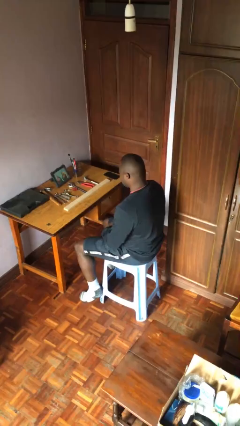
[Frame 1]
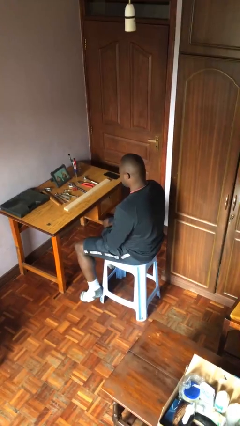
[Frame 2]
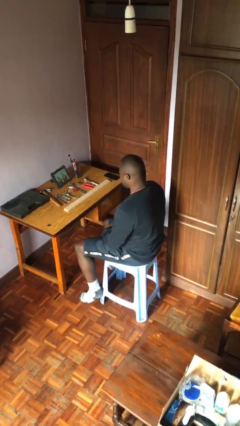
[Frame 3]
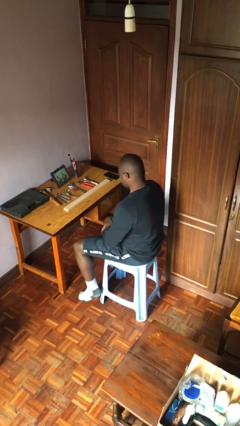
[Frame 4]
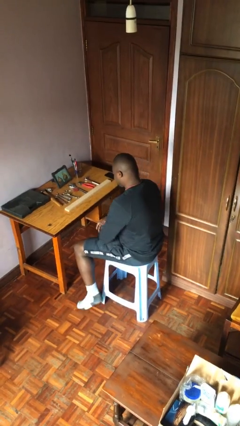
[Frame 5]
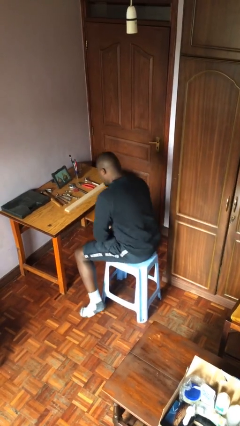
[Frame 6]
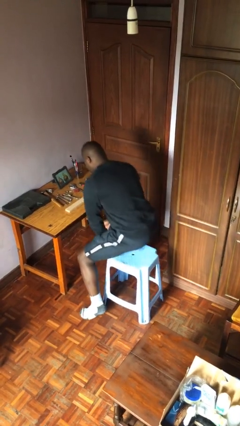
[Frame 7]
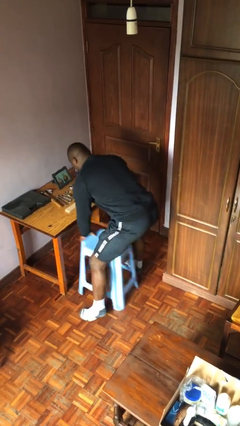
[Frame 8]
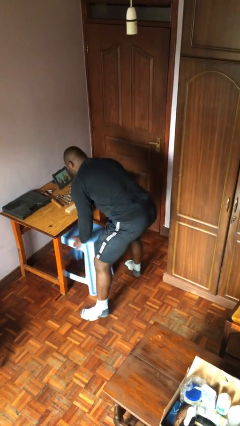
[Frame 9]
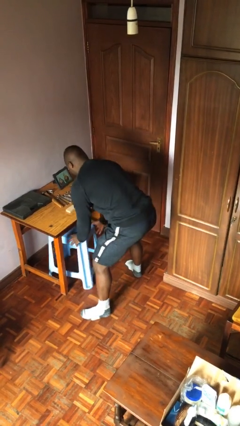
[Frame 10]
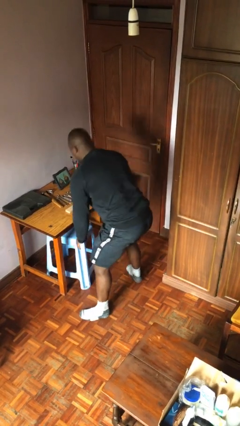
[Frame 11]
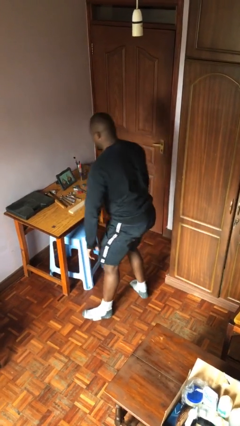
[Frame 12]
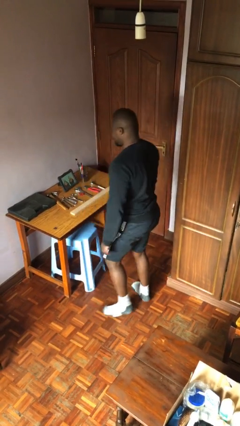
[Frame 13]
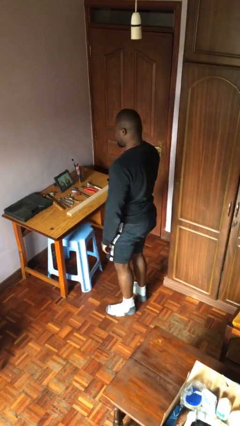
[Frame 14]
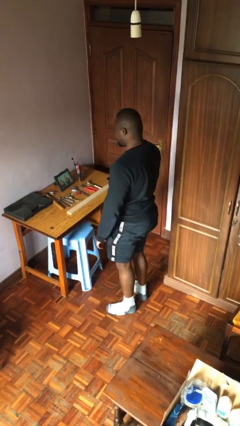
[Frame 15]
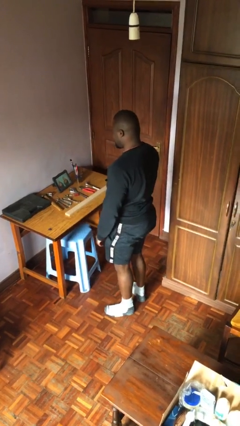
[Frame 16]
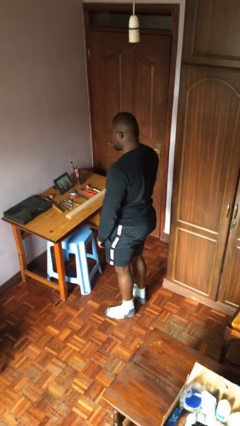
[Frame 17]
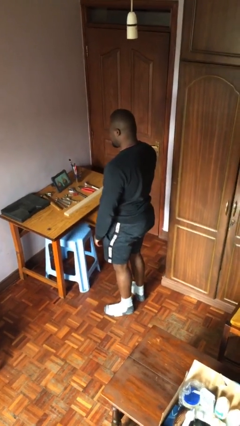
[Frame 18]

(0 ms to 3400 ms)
person stands up

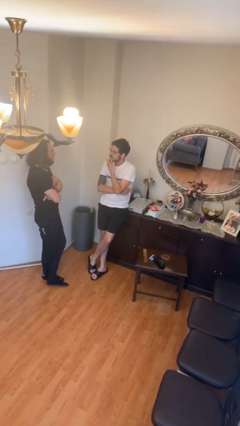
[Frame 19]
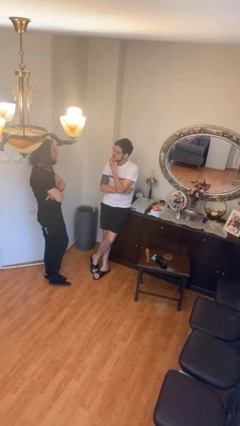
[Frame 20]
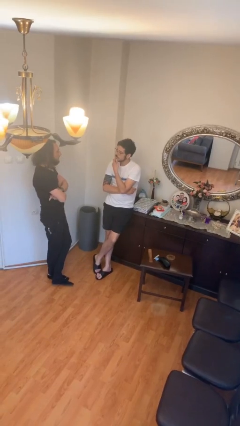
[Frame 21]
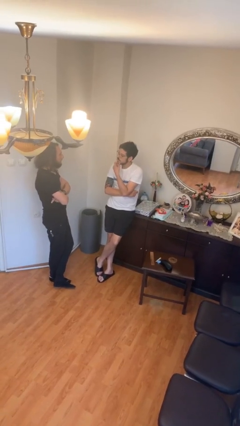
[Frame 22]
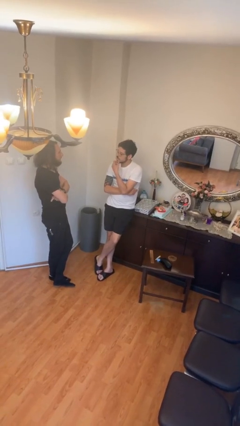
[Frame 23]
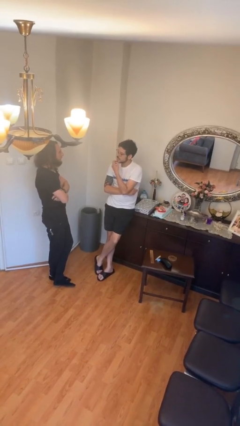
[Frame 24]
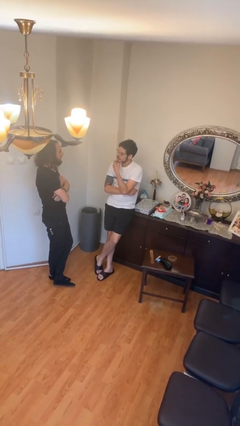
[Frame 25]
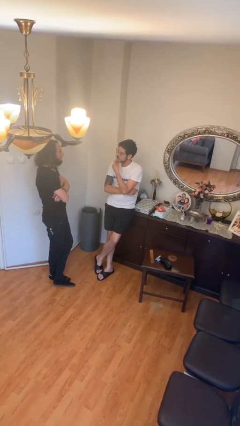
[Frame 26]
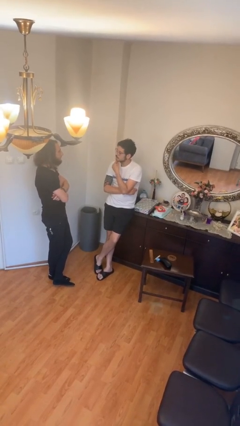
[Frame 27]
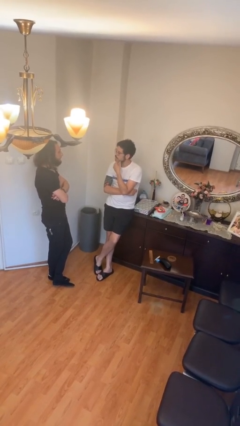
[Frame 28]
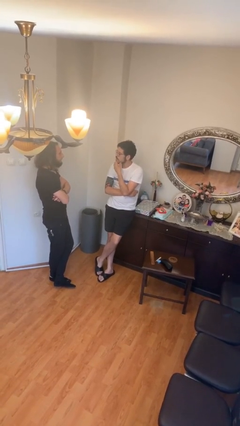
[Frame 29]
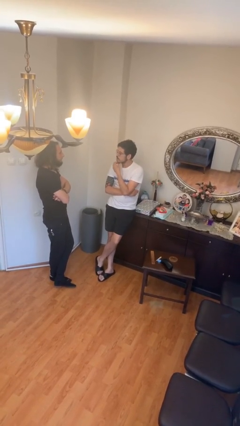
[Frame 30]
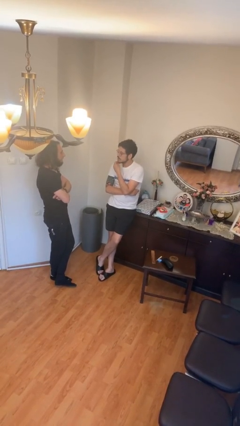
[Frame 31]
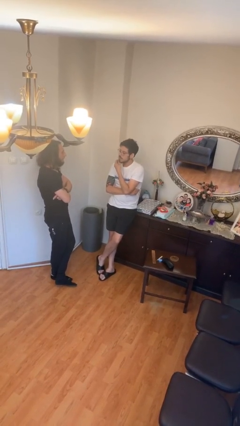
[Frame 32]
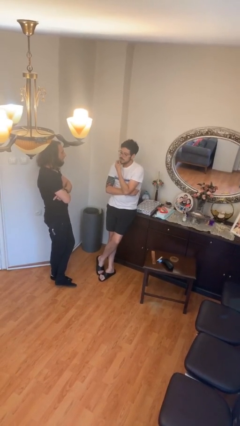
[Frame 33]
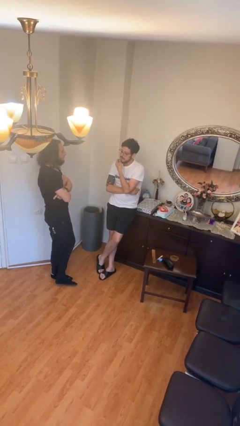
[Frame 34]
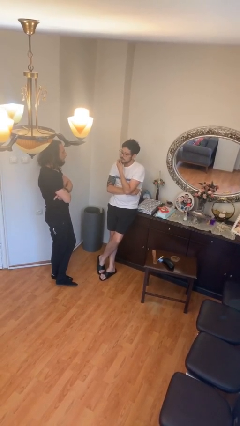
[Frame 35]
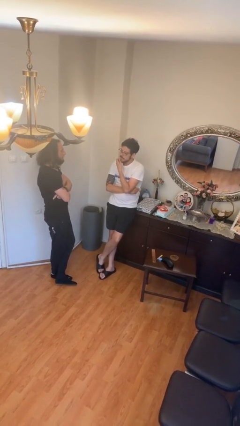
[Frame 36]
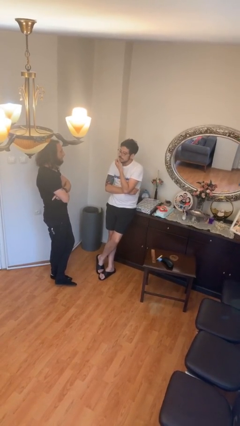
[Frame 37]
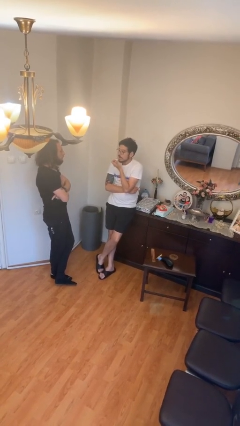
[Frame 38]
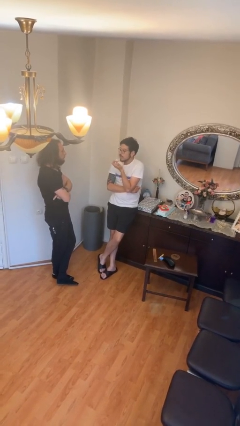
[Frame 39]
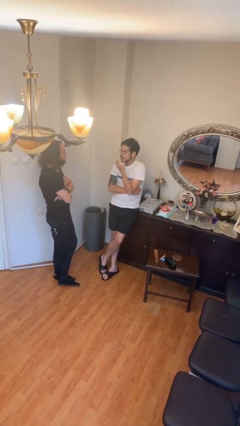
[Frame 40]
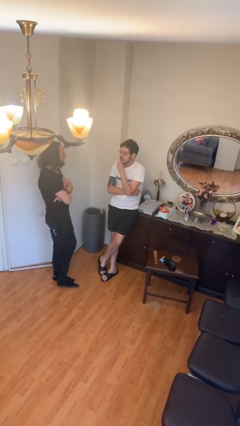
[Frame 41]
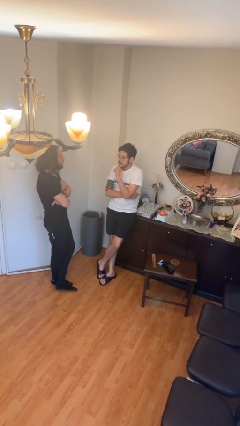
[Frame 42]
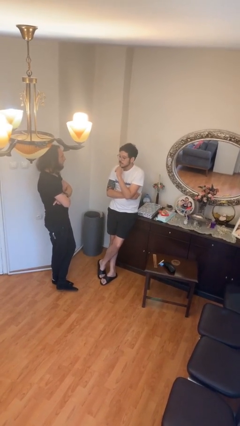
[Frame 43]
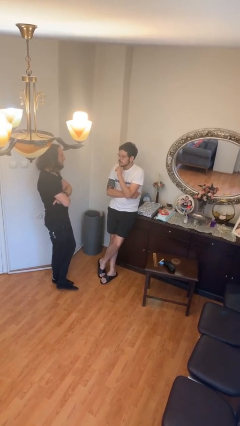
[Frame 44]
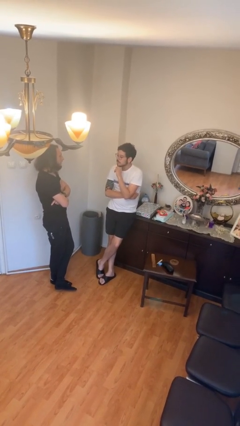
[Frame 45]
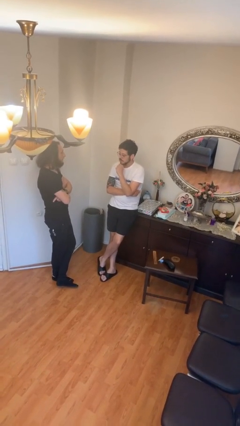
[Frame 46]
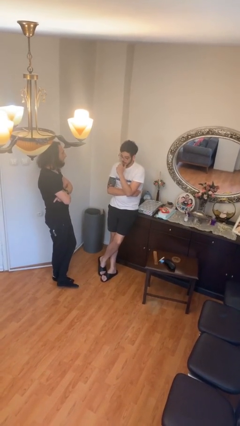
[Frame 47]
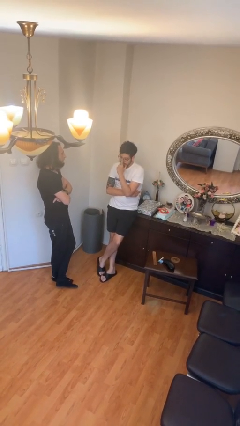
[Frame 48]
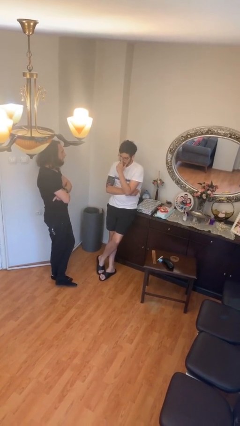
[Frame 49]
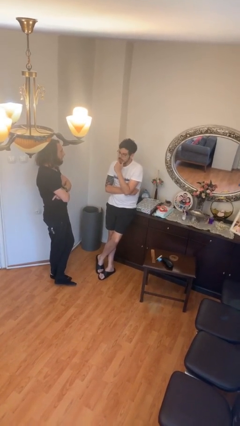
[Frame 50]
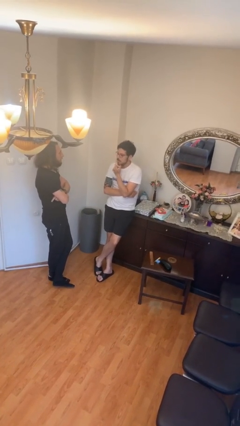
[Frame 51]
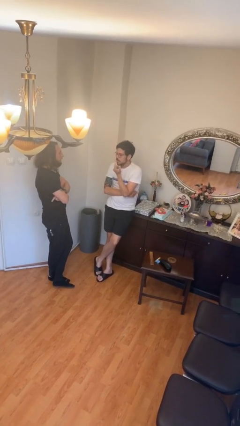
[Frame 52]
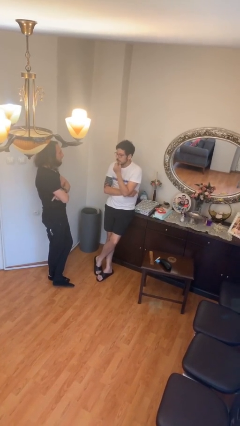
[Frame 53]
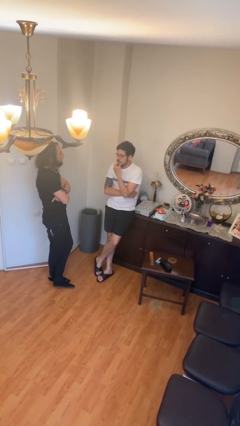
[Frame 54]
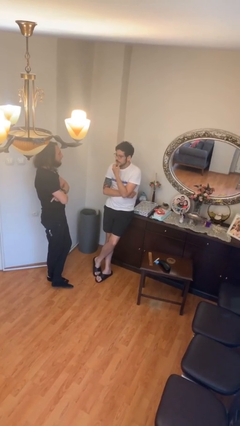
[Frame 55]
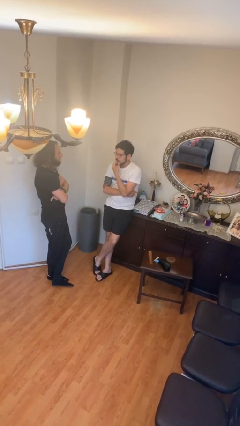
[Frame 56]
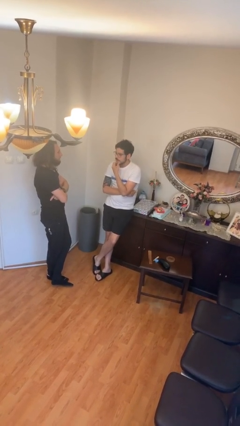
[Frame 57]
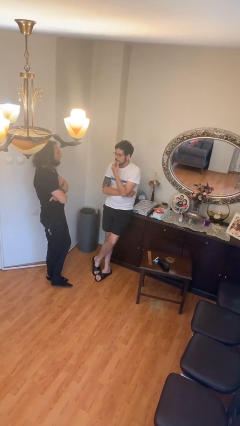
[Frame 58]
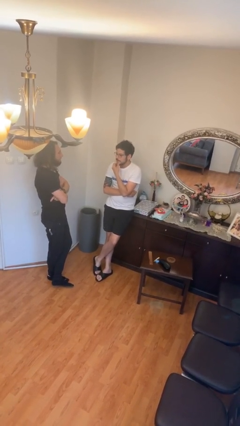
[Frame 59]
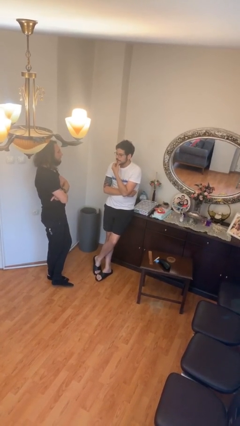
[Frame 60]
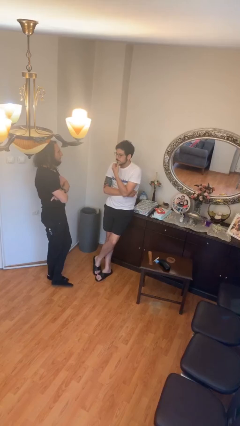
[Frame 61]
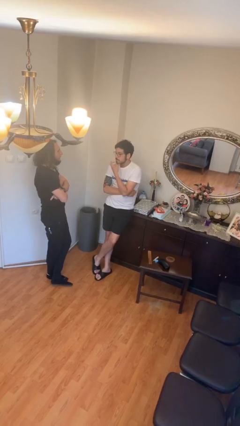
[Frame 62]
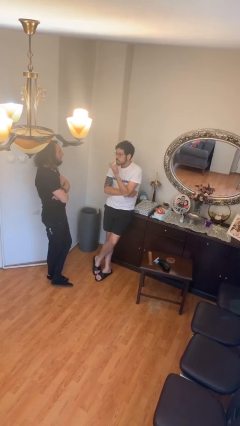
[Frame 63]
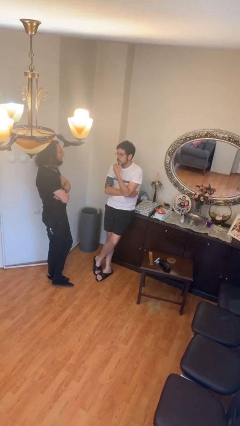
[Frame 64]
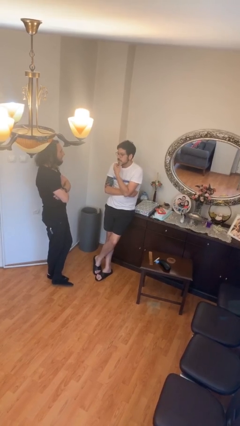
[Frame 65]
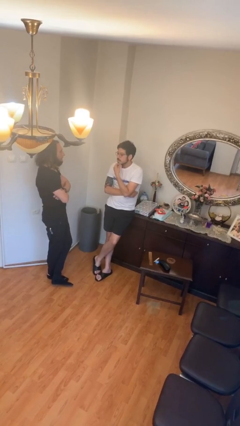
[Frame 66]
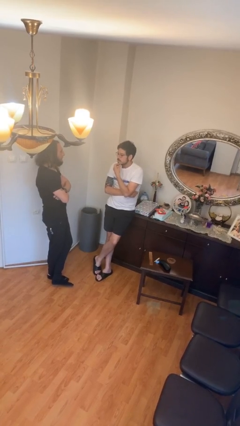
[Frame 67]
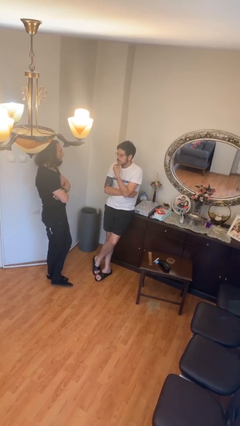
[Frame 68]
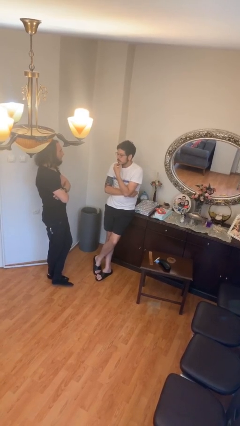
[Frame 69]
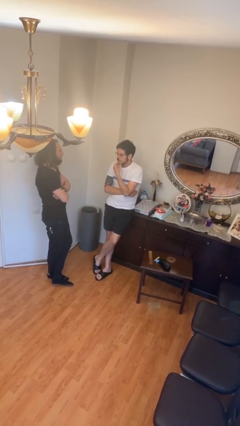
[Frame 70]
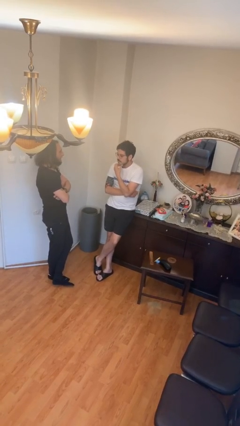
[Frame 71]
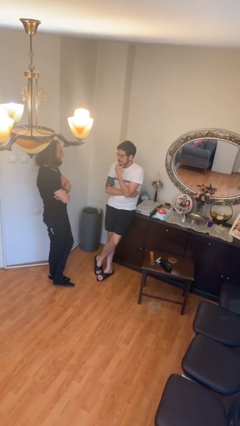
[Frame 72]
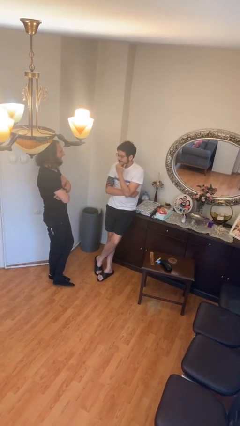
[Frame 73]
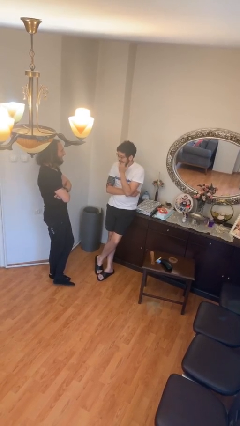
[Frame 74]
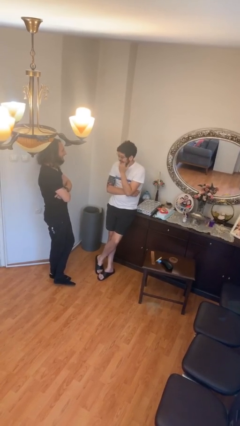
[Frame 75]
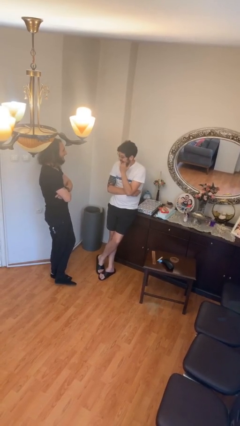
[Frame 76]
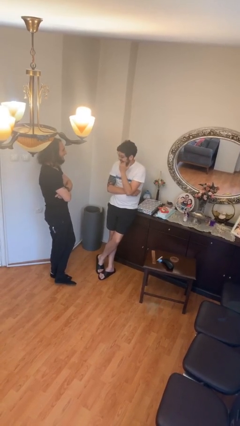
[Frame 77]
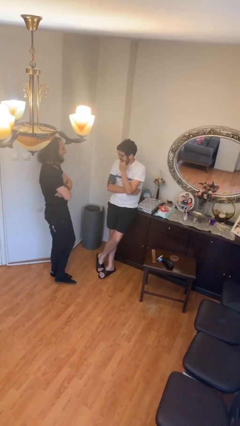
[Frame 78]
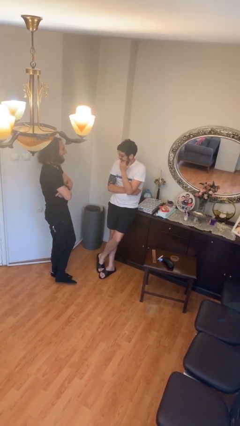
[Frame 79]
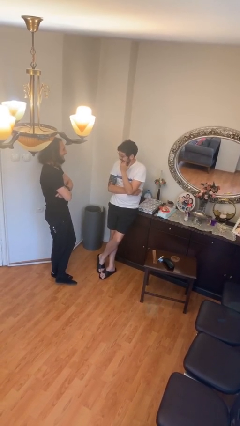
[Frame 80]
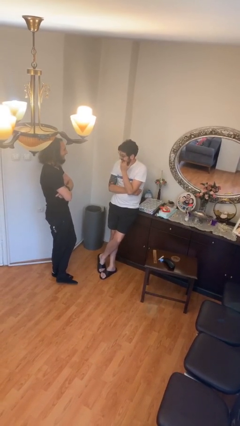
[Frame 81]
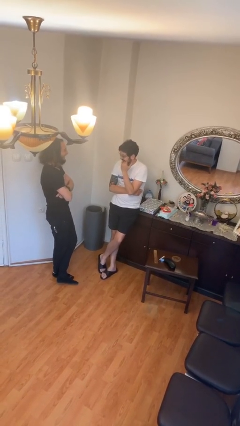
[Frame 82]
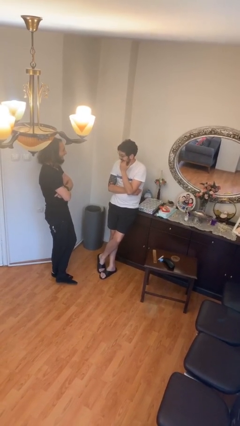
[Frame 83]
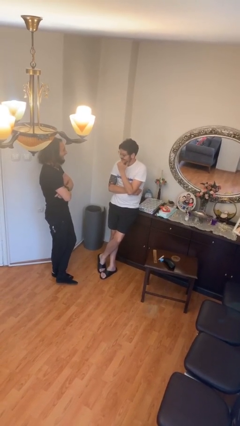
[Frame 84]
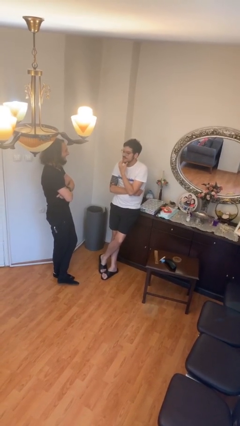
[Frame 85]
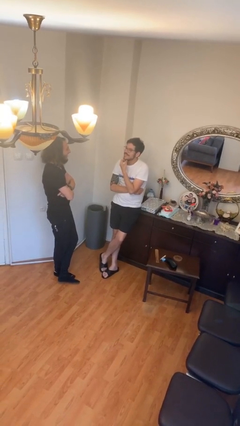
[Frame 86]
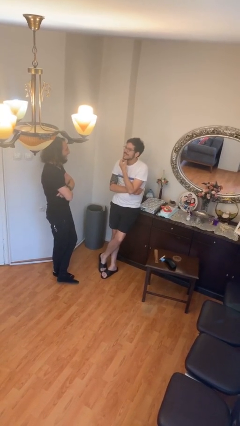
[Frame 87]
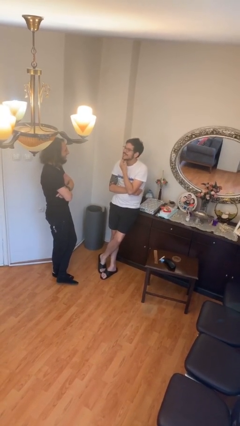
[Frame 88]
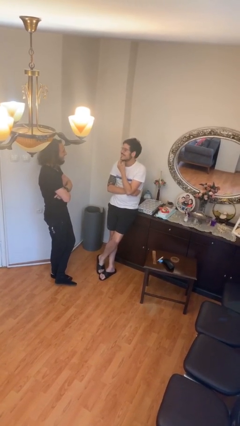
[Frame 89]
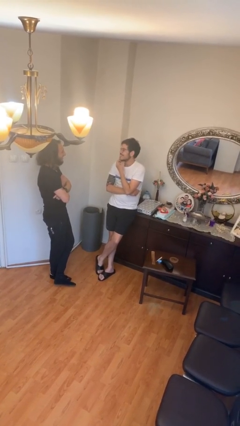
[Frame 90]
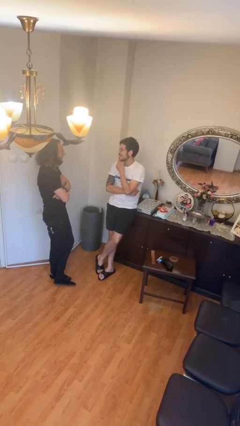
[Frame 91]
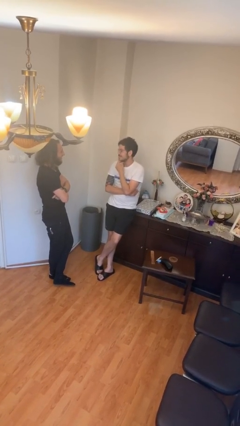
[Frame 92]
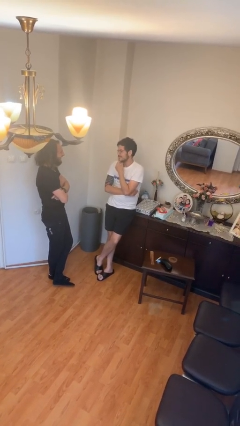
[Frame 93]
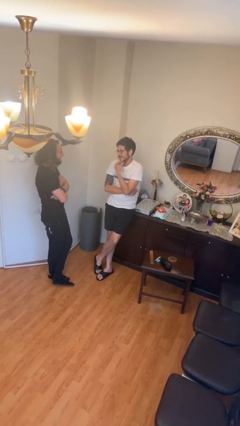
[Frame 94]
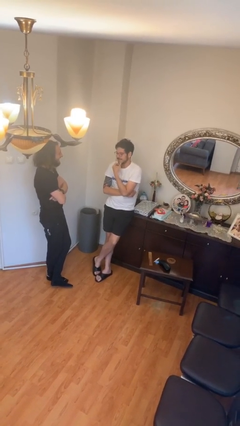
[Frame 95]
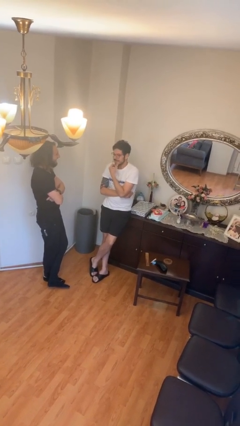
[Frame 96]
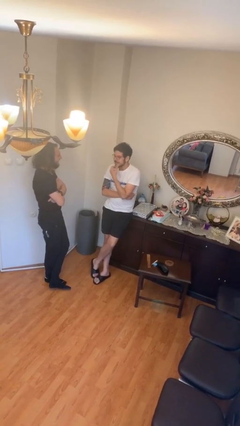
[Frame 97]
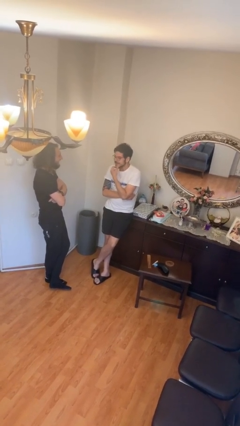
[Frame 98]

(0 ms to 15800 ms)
person talks to person
